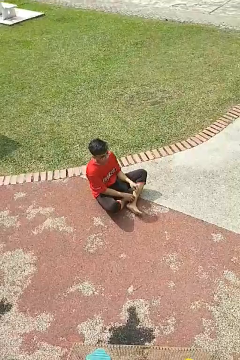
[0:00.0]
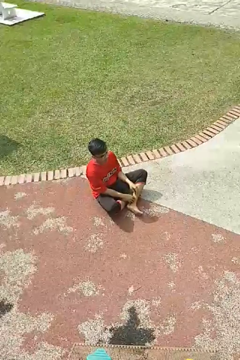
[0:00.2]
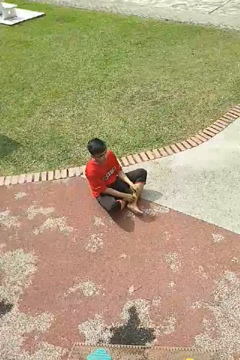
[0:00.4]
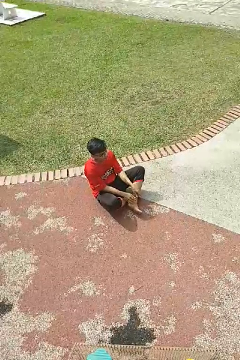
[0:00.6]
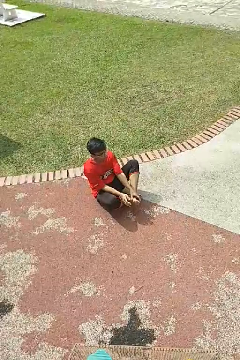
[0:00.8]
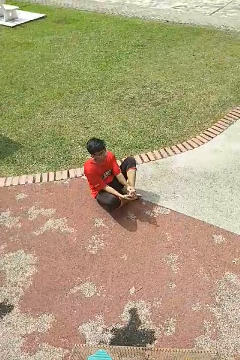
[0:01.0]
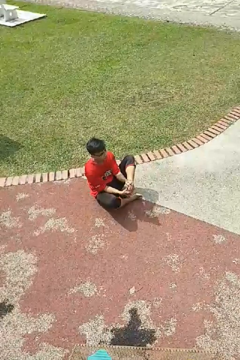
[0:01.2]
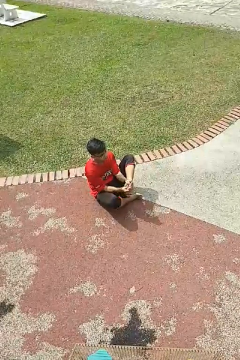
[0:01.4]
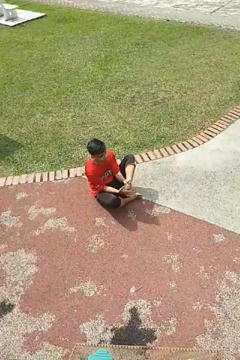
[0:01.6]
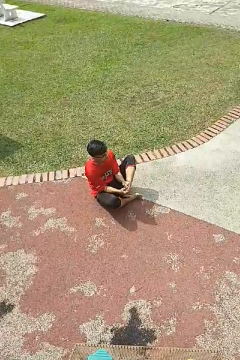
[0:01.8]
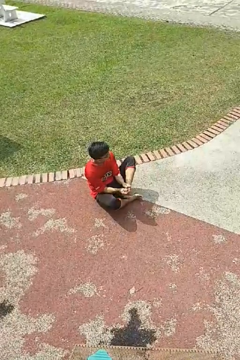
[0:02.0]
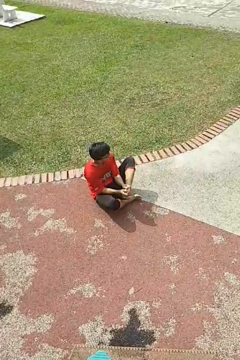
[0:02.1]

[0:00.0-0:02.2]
person rubs foot

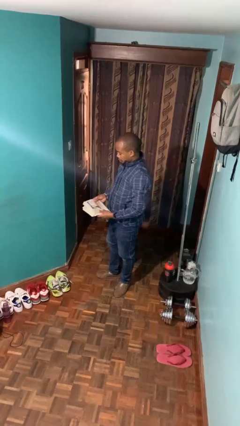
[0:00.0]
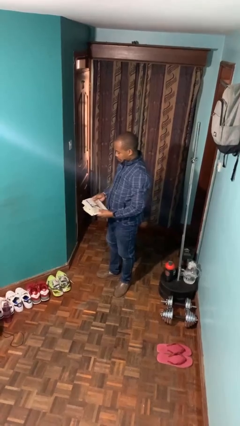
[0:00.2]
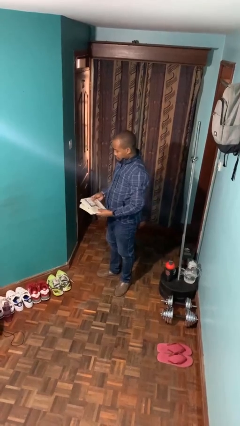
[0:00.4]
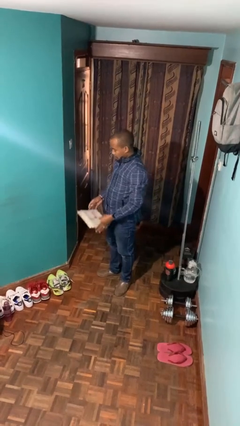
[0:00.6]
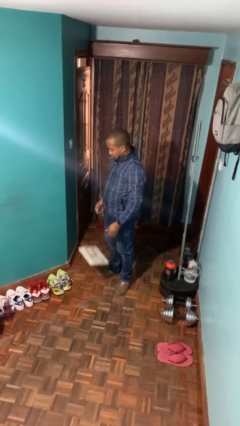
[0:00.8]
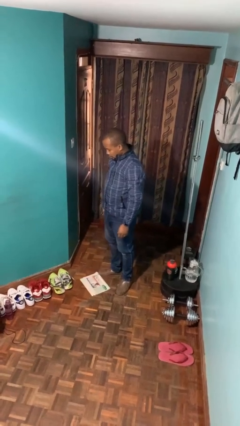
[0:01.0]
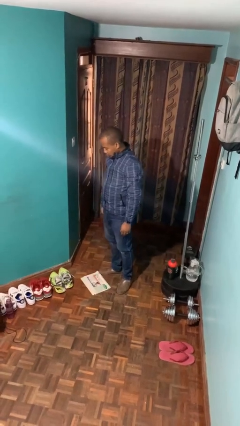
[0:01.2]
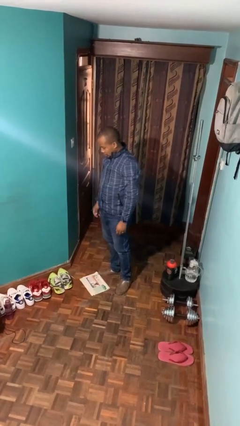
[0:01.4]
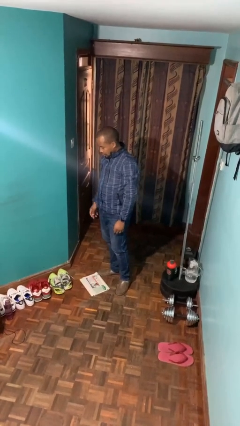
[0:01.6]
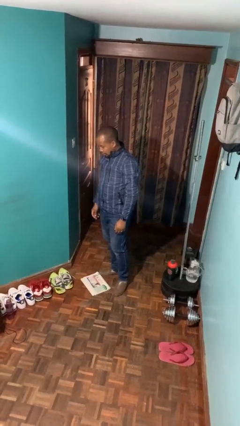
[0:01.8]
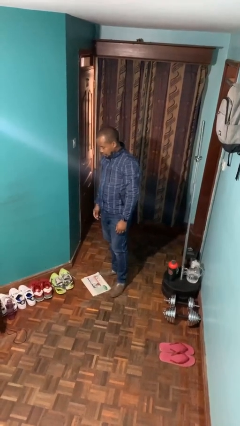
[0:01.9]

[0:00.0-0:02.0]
person drops object

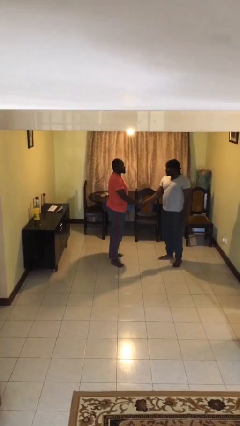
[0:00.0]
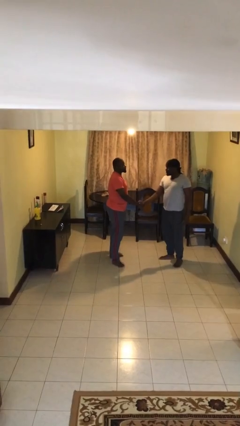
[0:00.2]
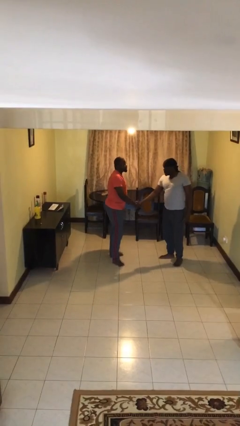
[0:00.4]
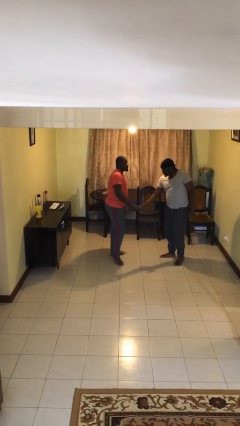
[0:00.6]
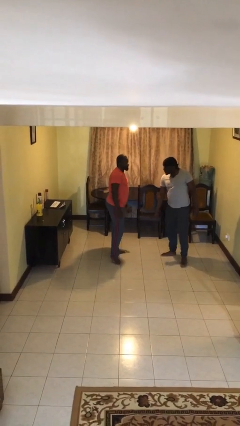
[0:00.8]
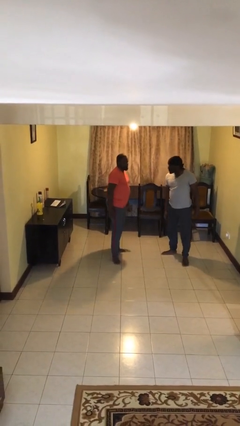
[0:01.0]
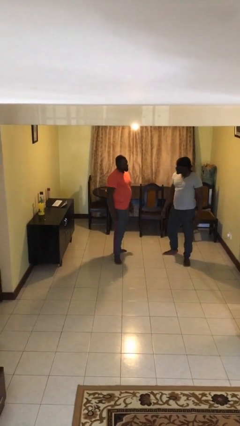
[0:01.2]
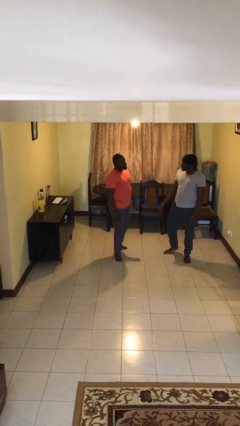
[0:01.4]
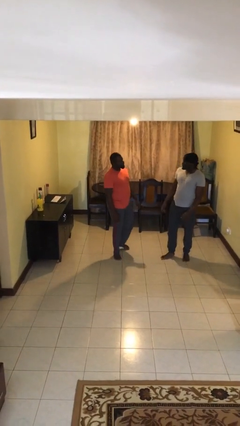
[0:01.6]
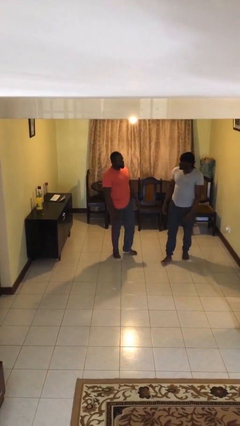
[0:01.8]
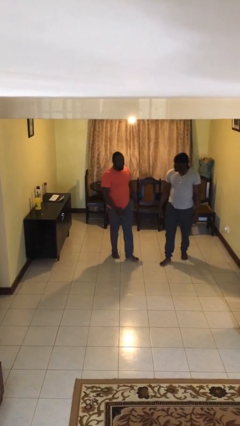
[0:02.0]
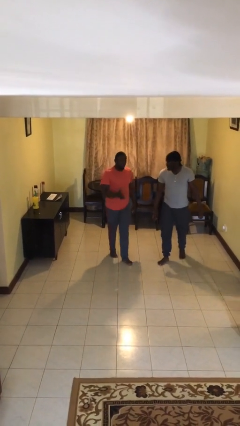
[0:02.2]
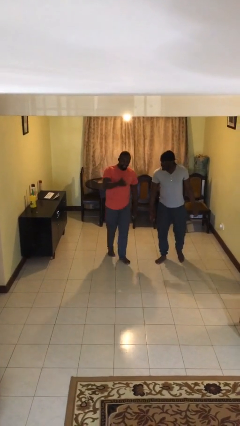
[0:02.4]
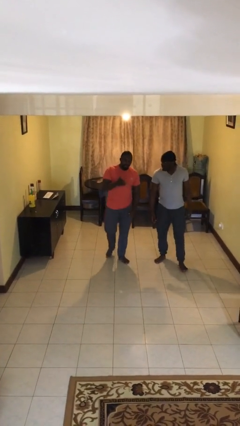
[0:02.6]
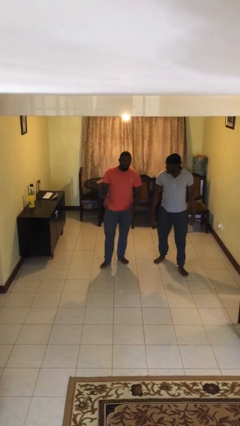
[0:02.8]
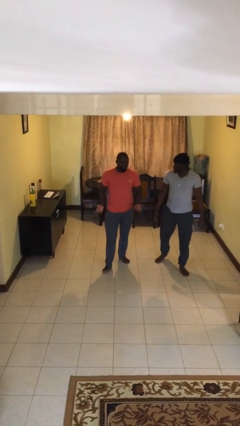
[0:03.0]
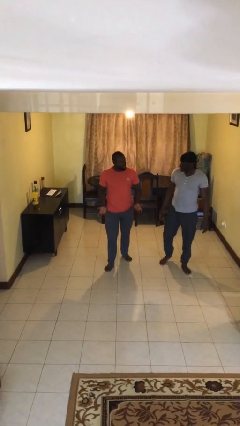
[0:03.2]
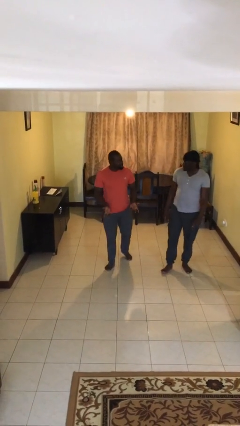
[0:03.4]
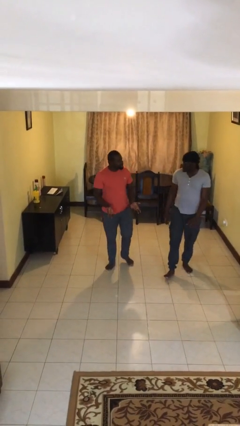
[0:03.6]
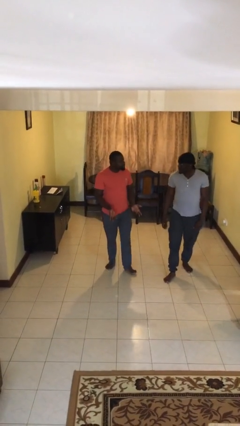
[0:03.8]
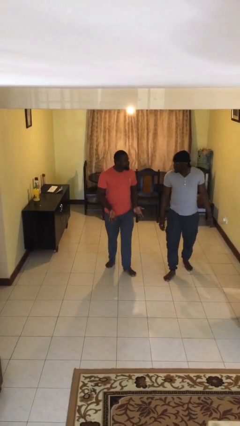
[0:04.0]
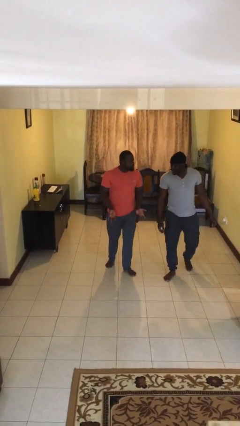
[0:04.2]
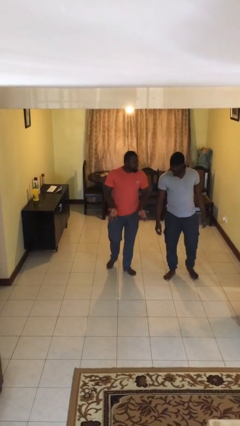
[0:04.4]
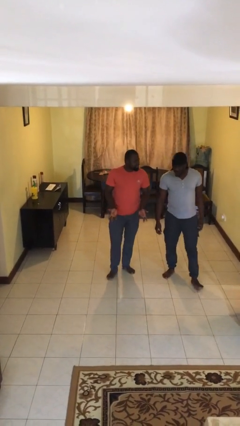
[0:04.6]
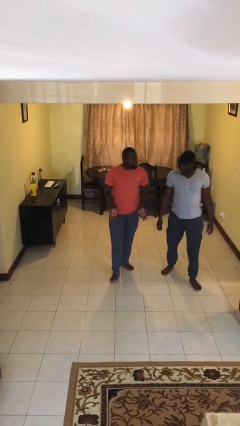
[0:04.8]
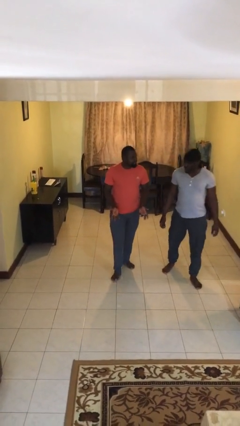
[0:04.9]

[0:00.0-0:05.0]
person talks to person

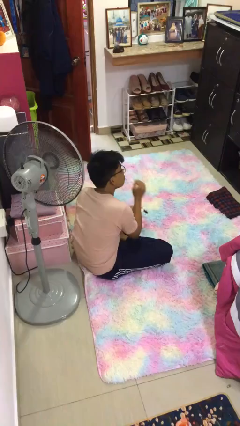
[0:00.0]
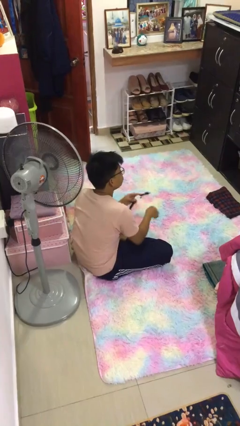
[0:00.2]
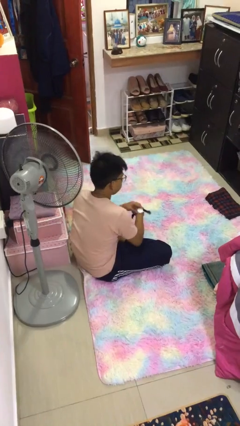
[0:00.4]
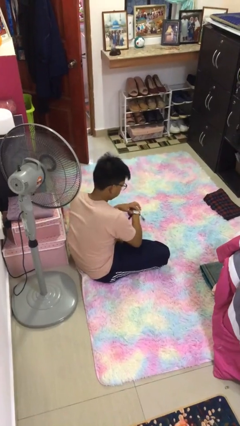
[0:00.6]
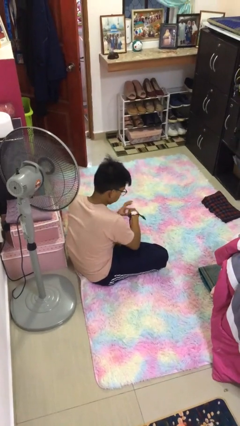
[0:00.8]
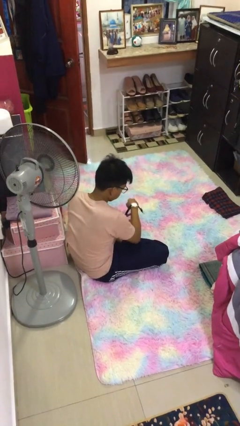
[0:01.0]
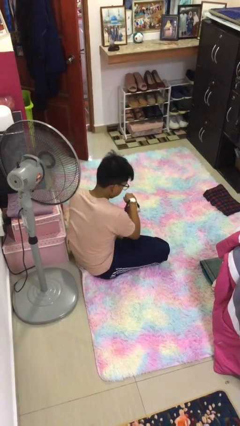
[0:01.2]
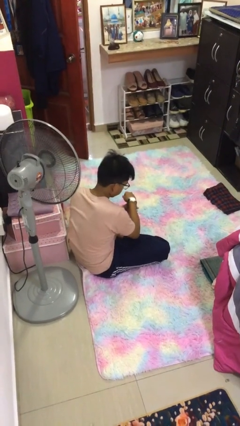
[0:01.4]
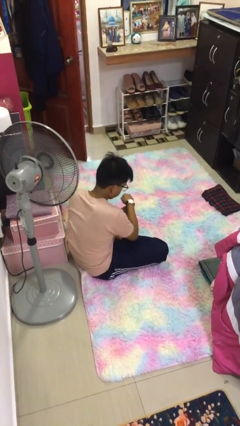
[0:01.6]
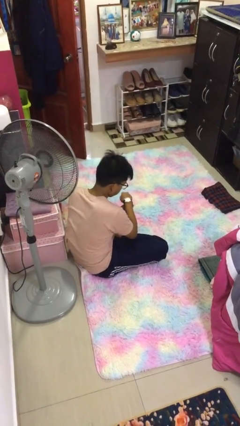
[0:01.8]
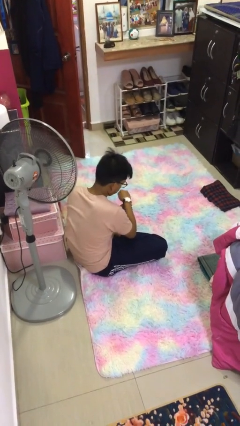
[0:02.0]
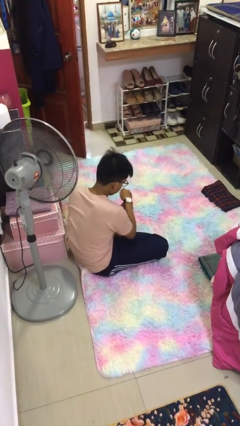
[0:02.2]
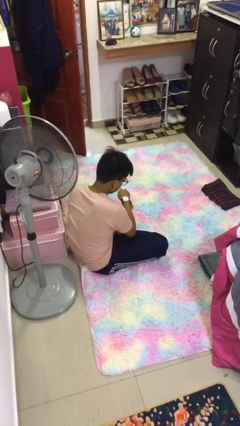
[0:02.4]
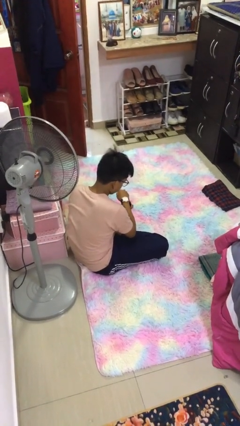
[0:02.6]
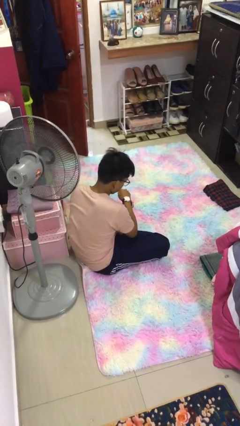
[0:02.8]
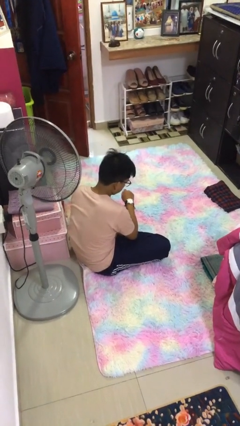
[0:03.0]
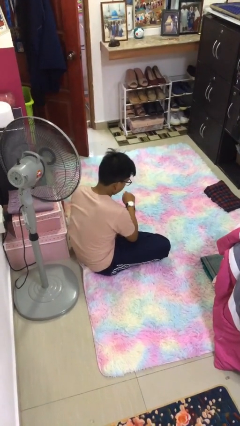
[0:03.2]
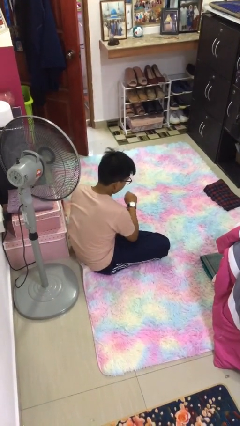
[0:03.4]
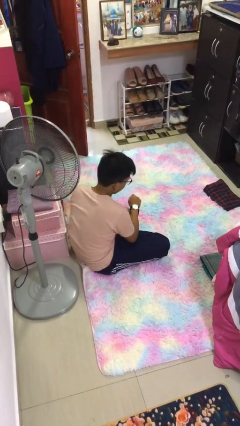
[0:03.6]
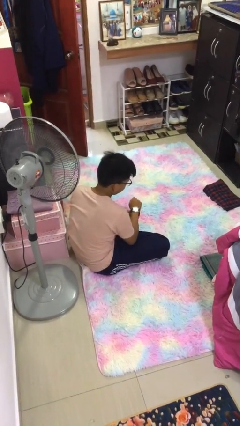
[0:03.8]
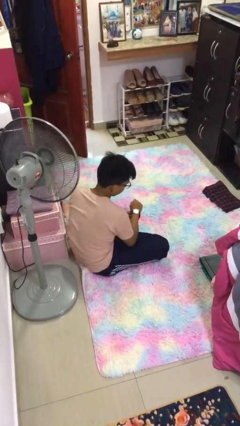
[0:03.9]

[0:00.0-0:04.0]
person puts on wristwatch

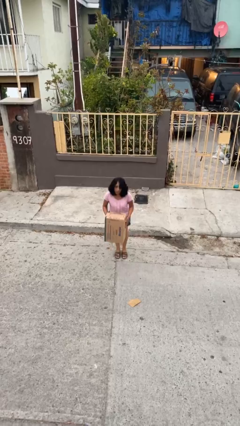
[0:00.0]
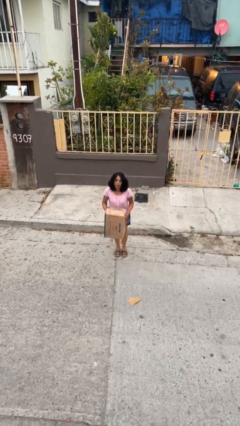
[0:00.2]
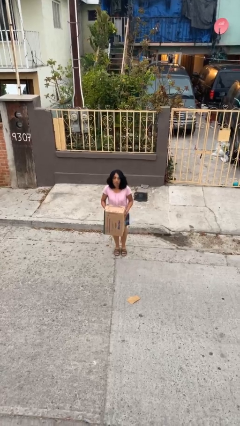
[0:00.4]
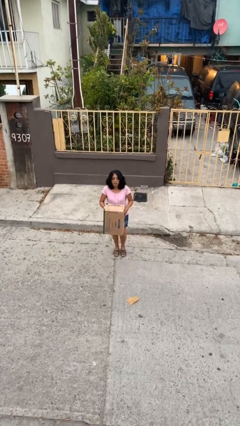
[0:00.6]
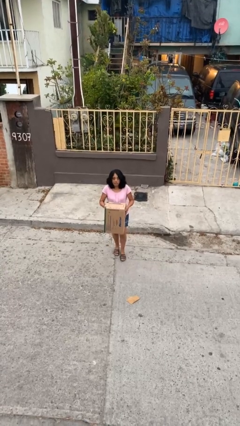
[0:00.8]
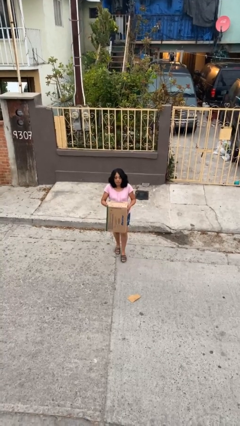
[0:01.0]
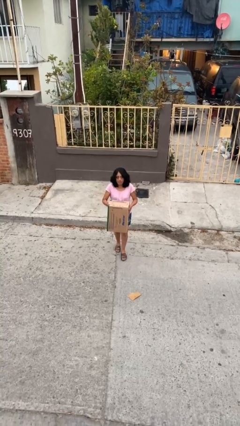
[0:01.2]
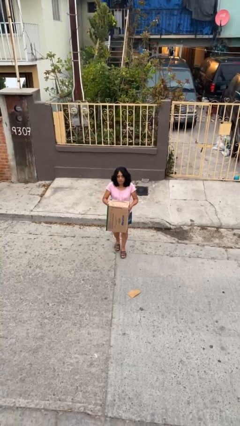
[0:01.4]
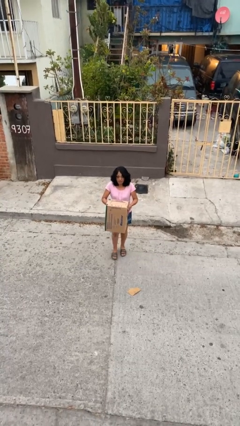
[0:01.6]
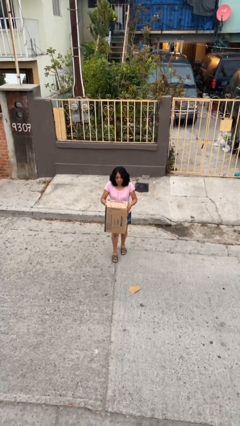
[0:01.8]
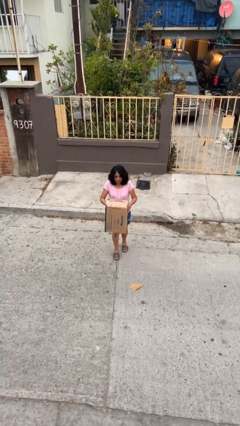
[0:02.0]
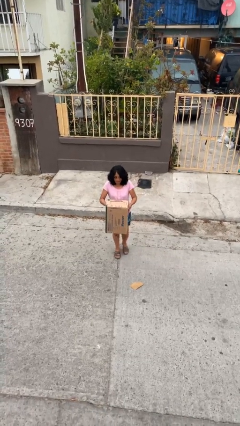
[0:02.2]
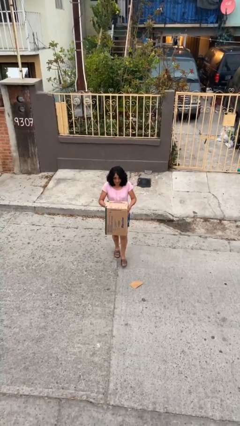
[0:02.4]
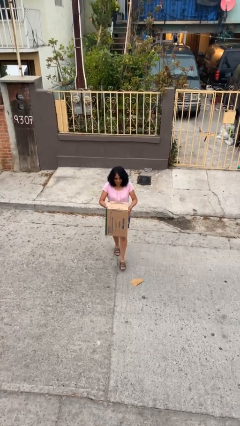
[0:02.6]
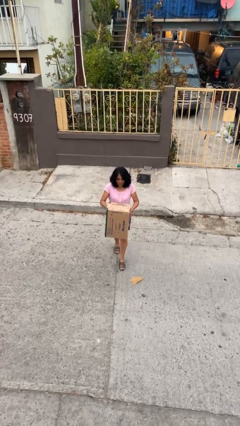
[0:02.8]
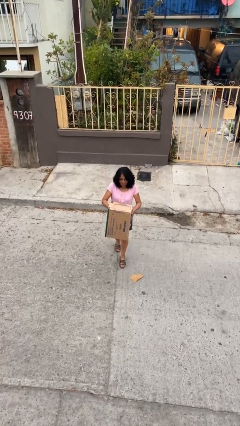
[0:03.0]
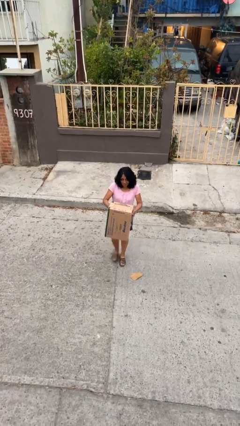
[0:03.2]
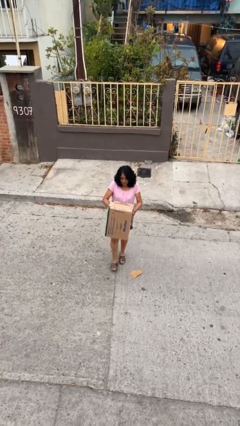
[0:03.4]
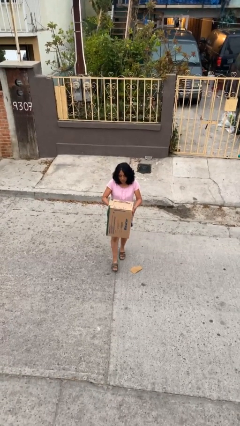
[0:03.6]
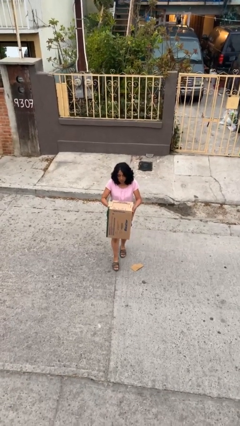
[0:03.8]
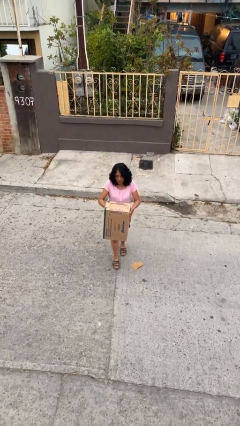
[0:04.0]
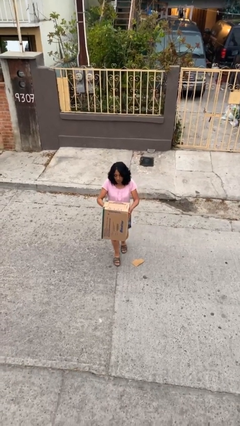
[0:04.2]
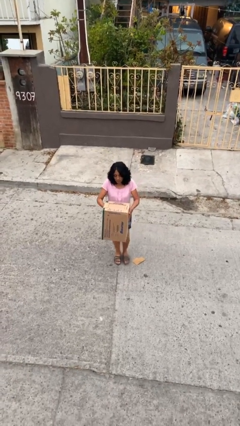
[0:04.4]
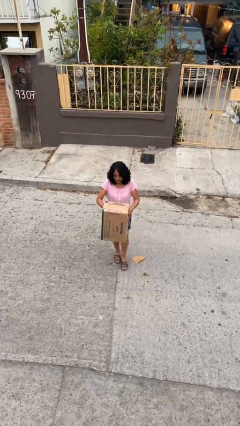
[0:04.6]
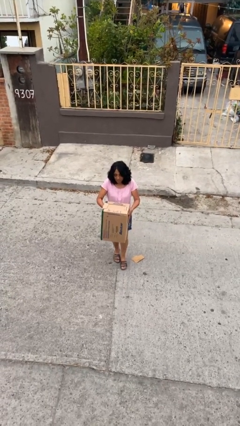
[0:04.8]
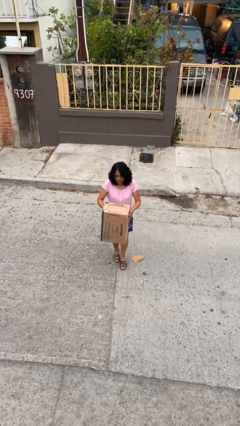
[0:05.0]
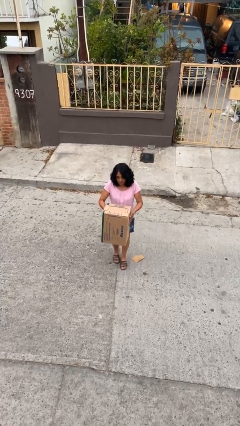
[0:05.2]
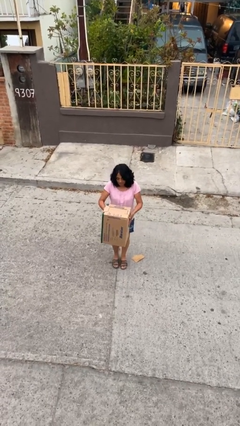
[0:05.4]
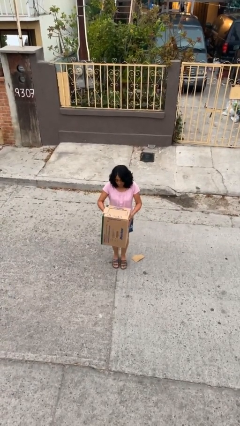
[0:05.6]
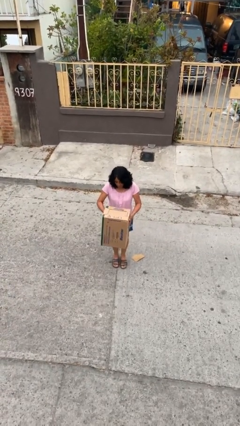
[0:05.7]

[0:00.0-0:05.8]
person carries heavy object
